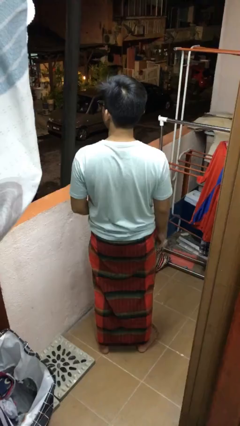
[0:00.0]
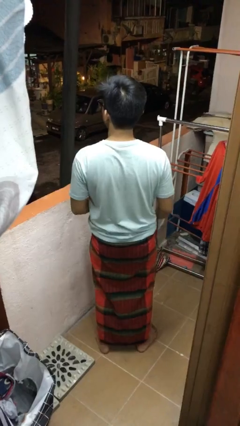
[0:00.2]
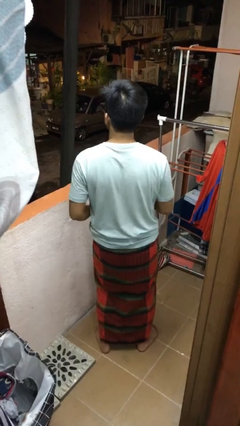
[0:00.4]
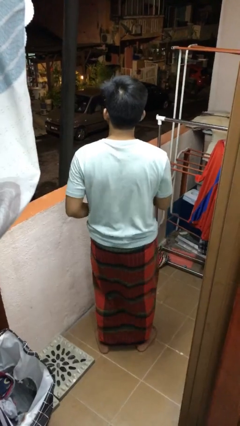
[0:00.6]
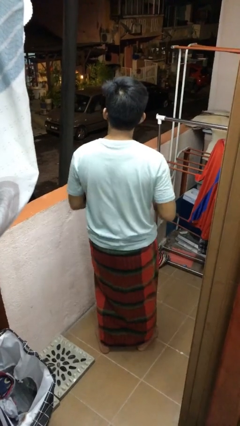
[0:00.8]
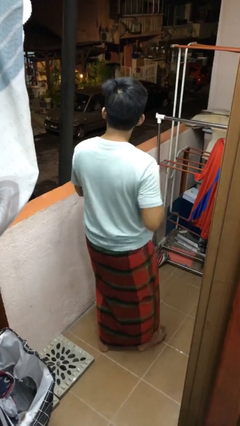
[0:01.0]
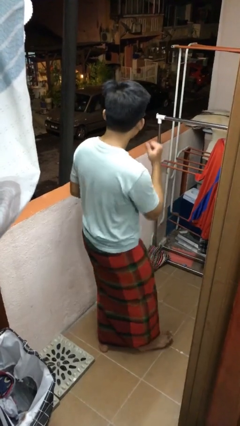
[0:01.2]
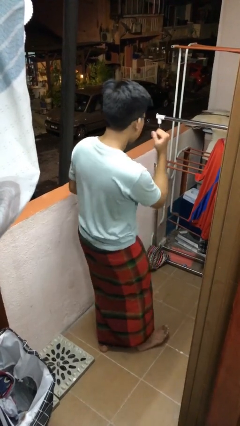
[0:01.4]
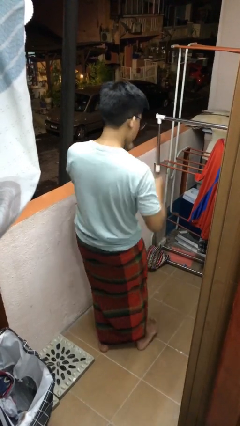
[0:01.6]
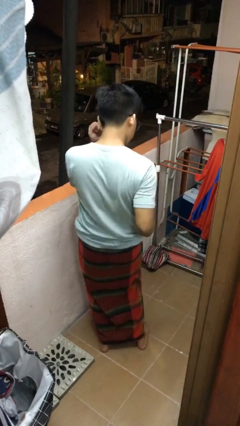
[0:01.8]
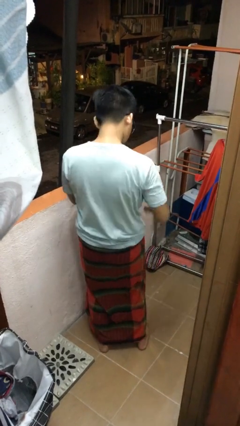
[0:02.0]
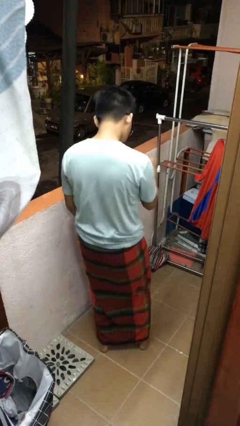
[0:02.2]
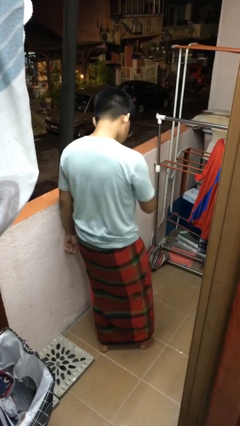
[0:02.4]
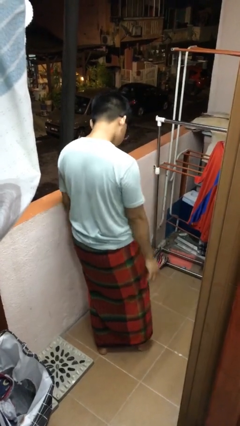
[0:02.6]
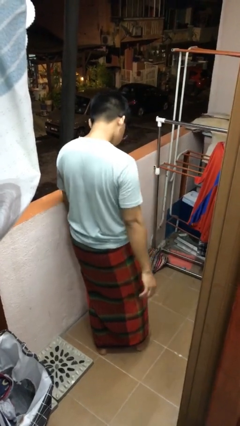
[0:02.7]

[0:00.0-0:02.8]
person dances in place

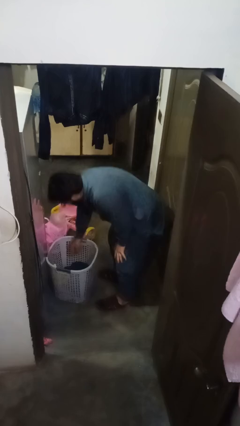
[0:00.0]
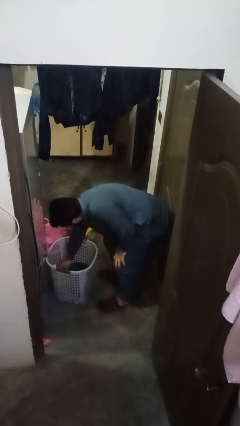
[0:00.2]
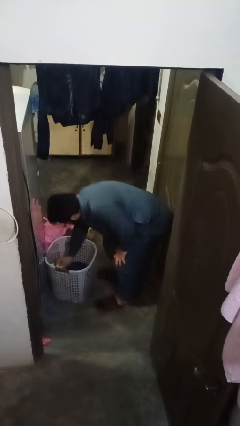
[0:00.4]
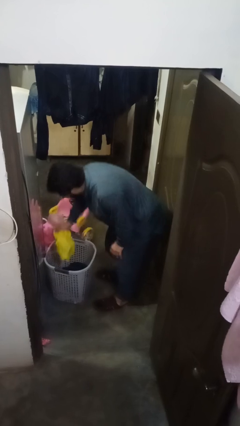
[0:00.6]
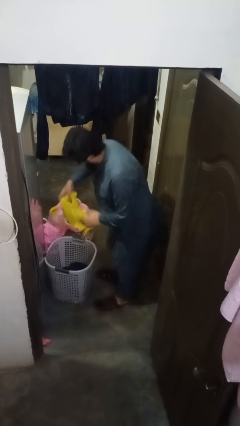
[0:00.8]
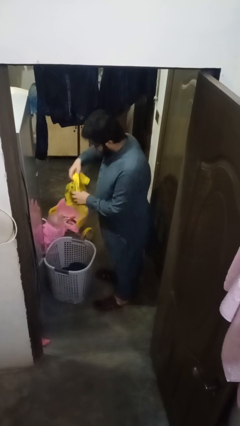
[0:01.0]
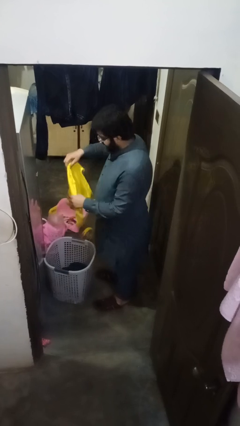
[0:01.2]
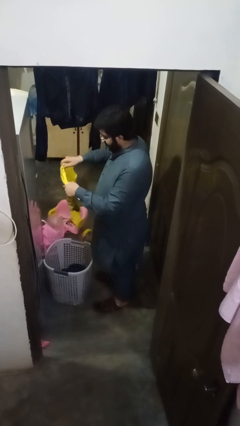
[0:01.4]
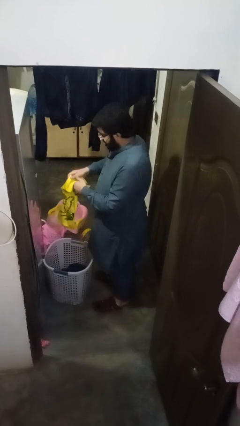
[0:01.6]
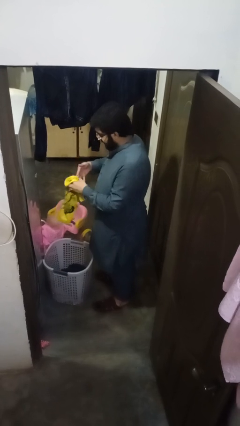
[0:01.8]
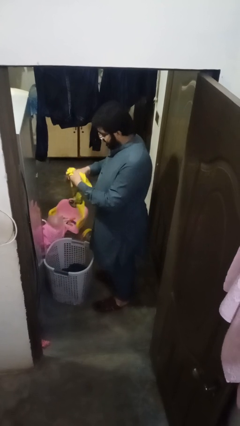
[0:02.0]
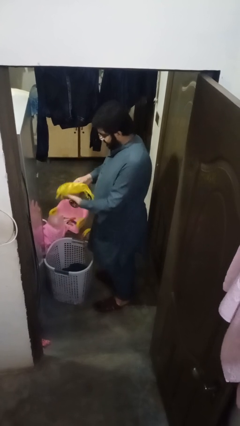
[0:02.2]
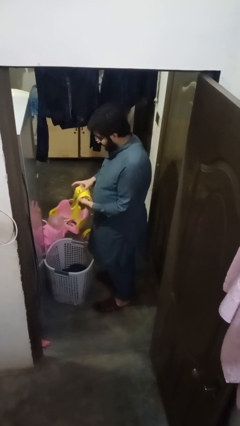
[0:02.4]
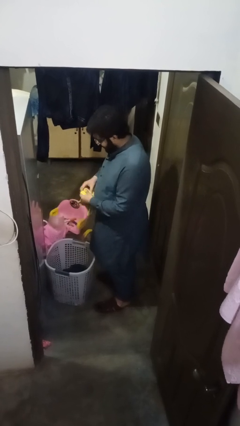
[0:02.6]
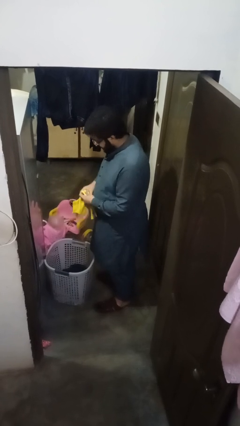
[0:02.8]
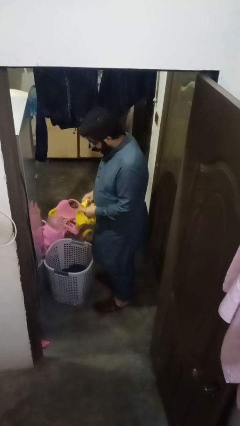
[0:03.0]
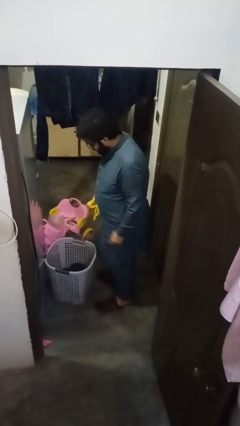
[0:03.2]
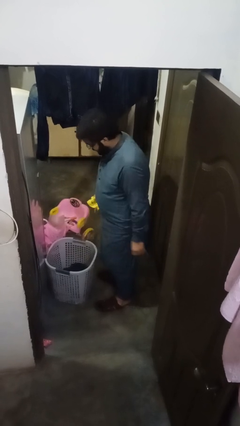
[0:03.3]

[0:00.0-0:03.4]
person folds shirt

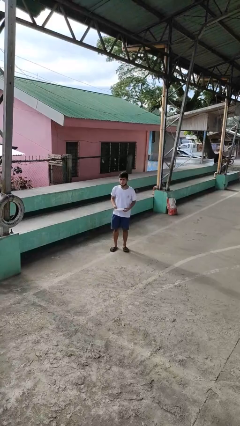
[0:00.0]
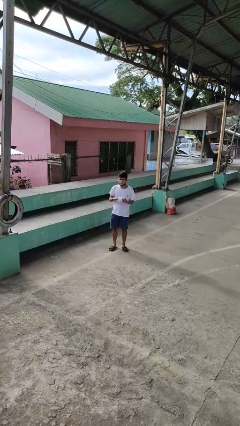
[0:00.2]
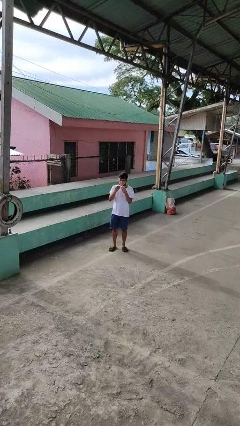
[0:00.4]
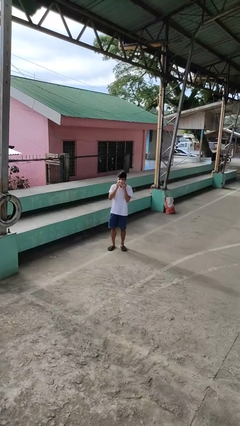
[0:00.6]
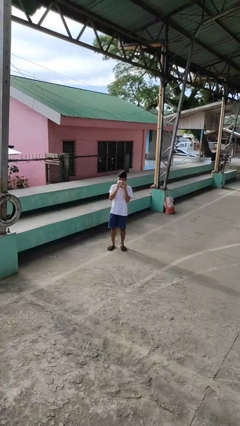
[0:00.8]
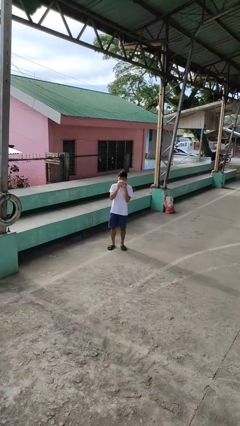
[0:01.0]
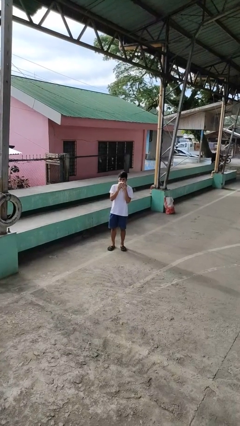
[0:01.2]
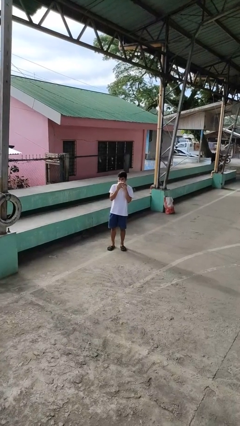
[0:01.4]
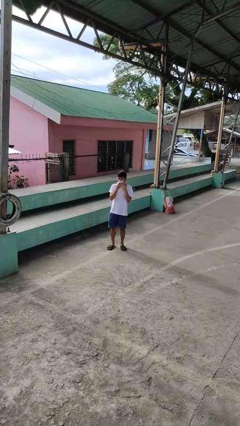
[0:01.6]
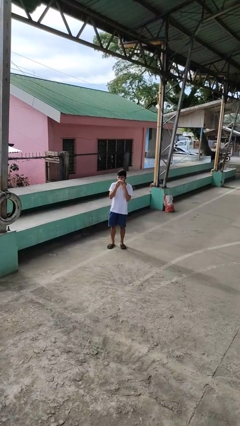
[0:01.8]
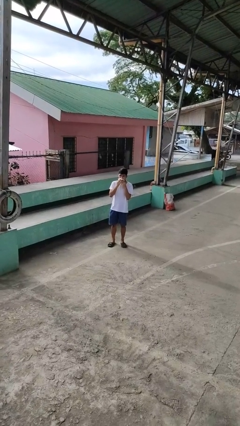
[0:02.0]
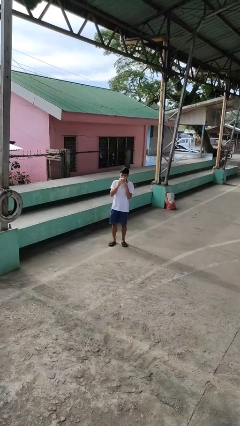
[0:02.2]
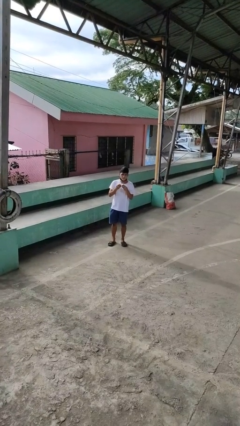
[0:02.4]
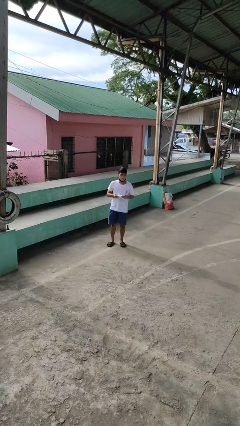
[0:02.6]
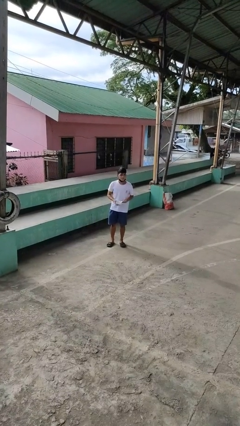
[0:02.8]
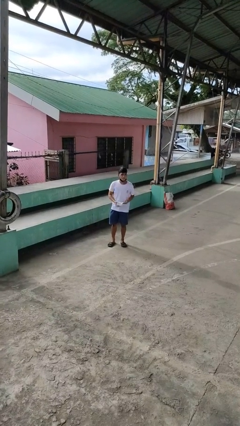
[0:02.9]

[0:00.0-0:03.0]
person wipes mouth with napkin

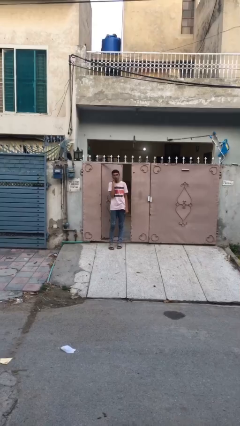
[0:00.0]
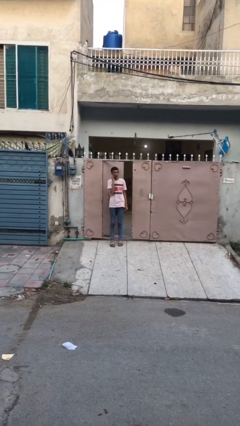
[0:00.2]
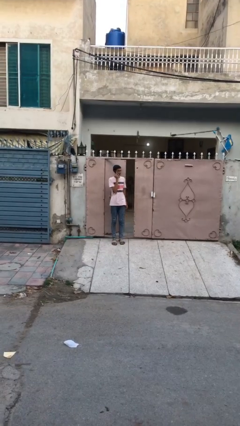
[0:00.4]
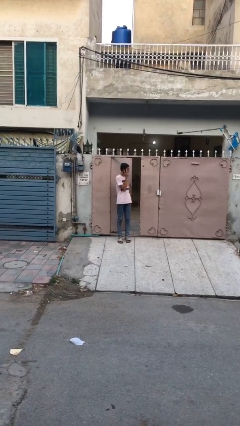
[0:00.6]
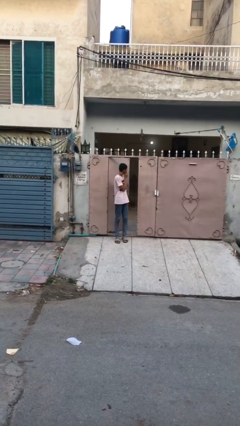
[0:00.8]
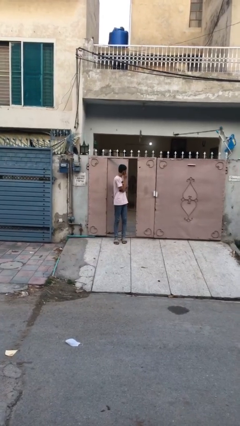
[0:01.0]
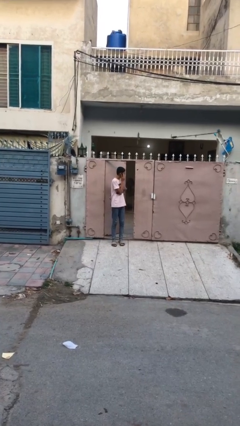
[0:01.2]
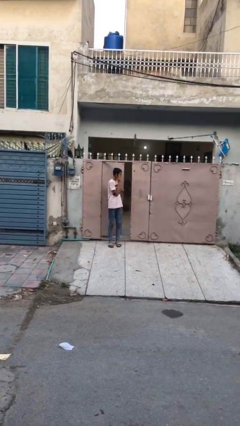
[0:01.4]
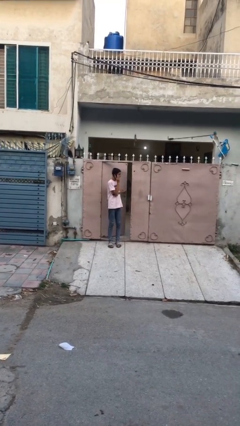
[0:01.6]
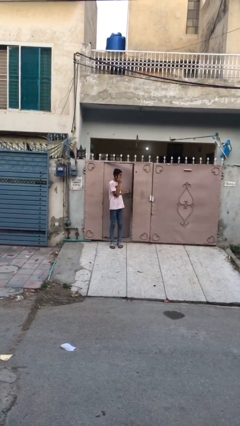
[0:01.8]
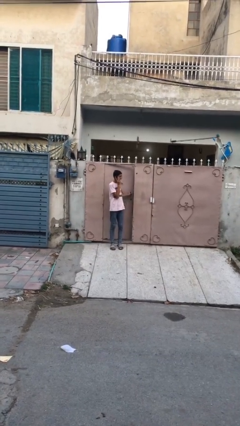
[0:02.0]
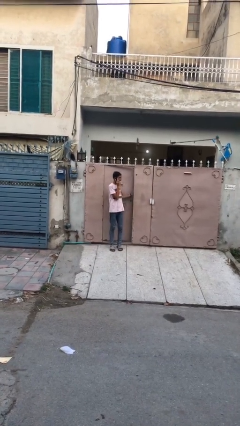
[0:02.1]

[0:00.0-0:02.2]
person closes facility door

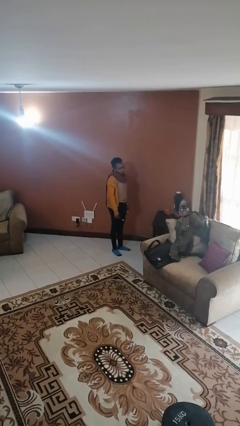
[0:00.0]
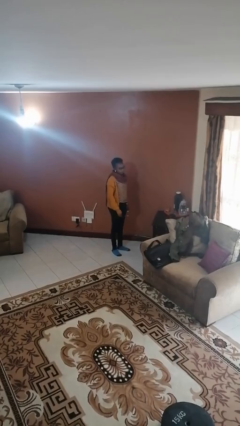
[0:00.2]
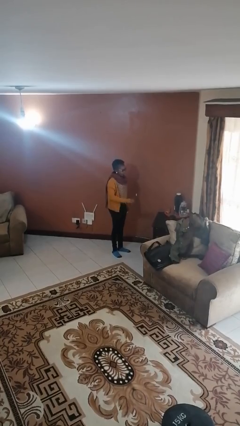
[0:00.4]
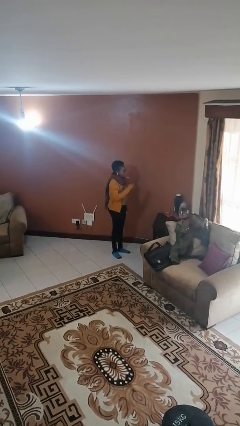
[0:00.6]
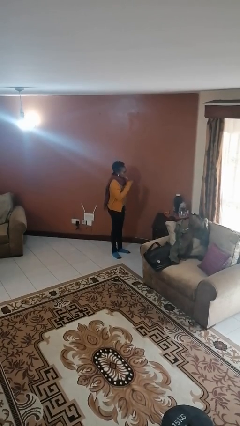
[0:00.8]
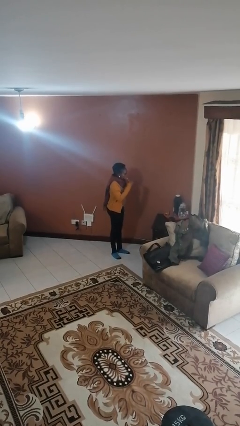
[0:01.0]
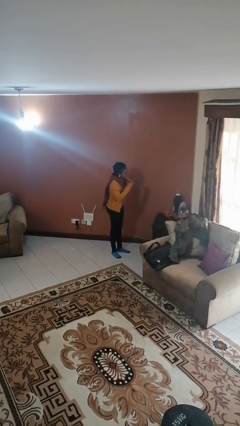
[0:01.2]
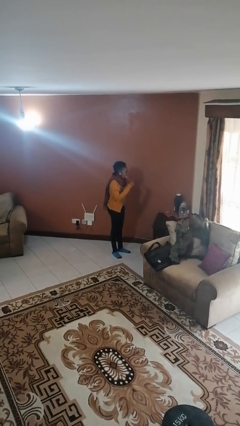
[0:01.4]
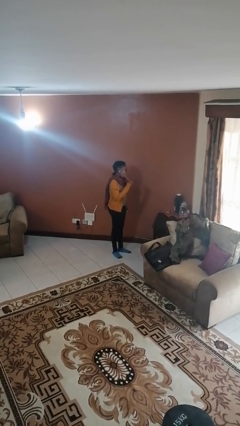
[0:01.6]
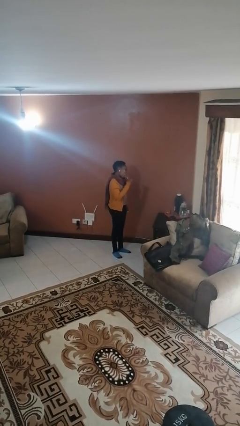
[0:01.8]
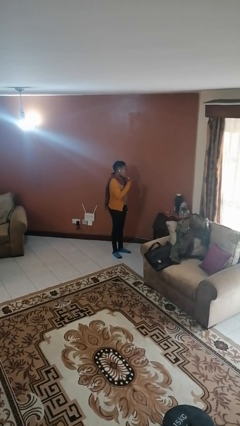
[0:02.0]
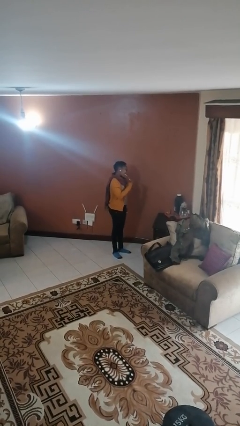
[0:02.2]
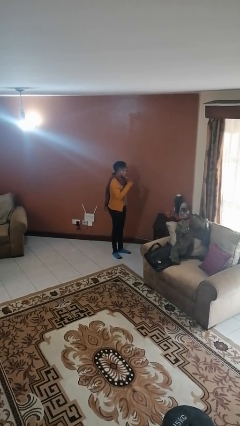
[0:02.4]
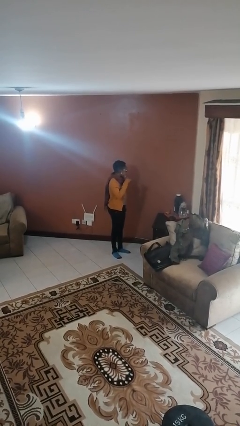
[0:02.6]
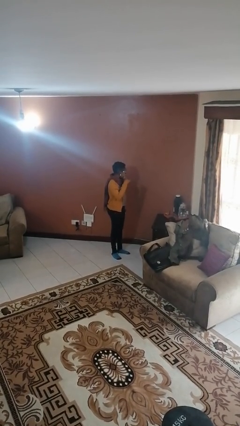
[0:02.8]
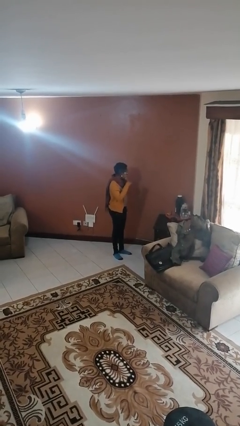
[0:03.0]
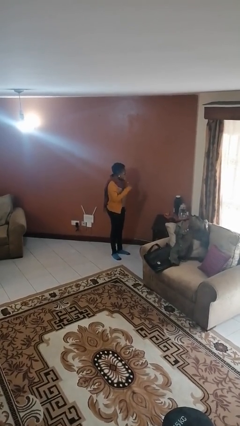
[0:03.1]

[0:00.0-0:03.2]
person brushes teeth

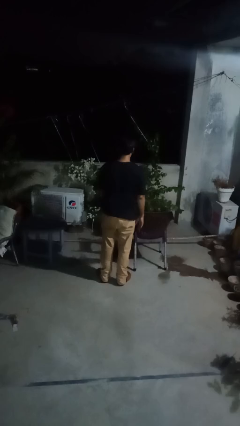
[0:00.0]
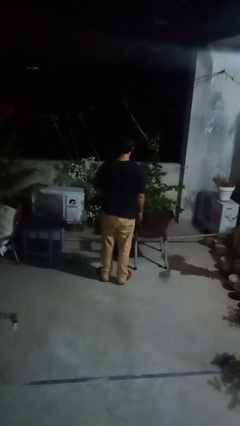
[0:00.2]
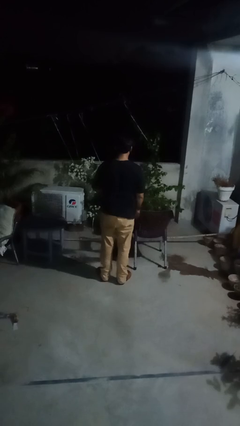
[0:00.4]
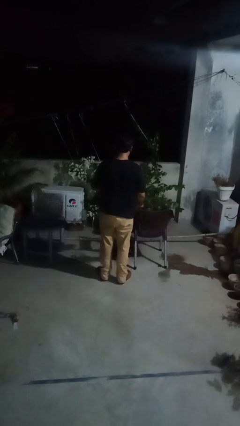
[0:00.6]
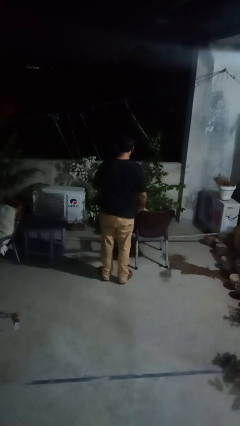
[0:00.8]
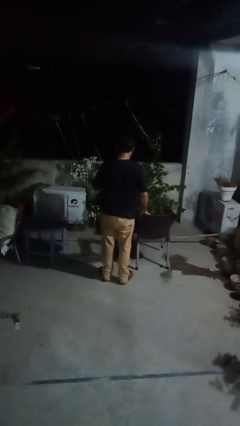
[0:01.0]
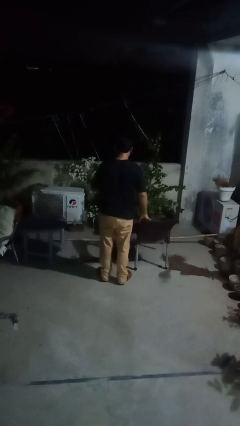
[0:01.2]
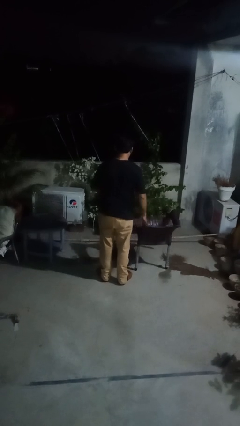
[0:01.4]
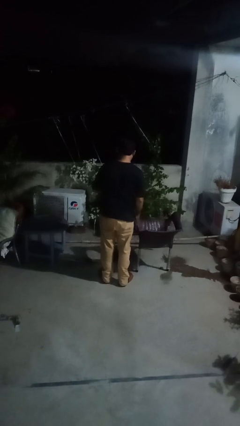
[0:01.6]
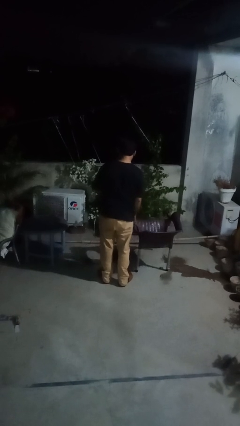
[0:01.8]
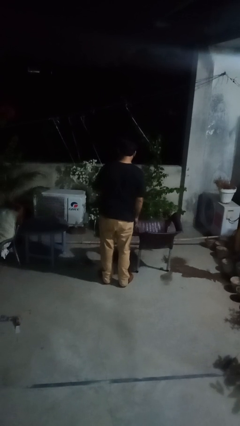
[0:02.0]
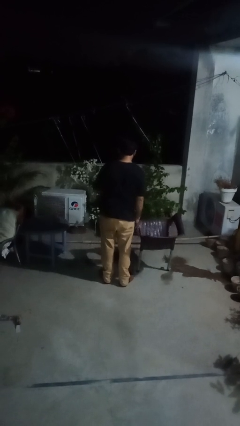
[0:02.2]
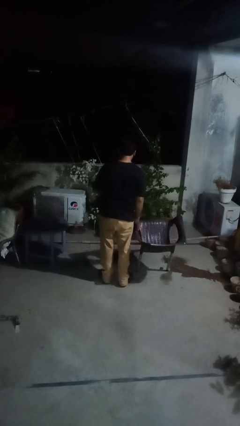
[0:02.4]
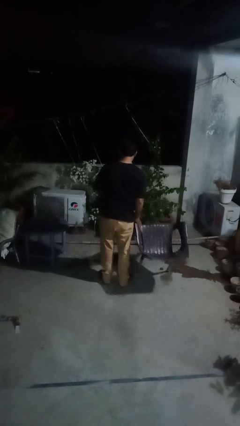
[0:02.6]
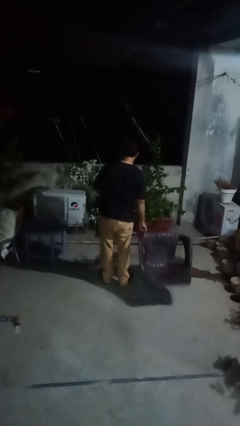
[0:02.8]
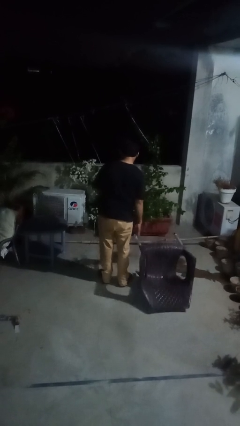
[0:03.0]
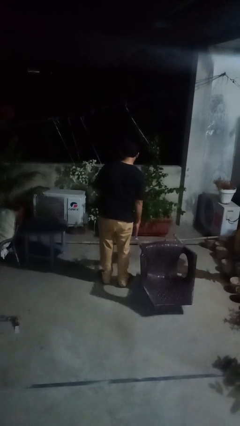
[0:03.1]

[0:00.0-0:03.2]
person knocks over furniture
